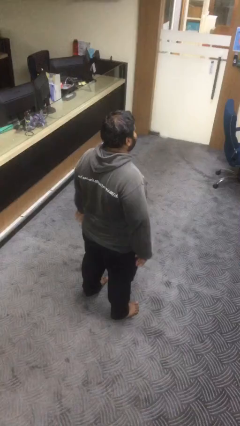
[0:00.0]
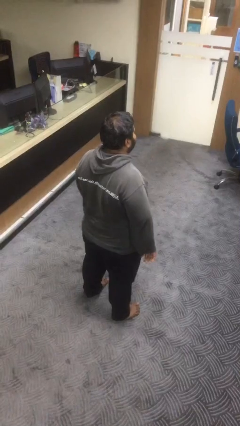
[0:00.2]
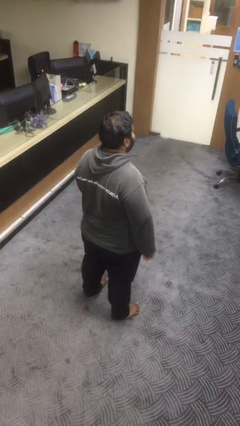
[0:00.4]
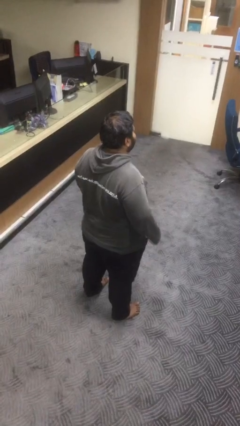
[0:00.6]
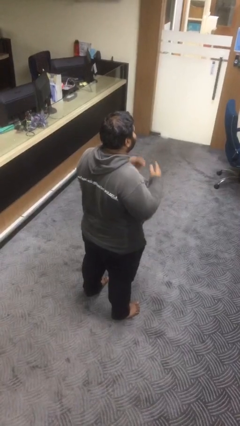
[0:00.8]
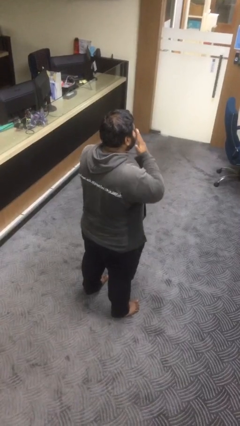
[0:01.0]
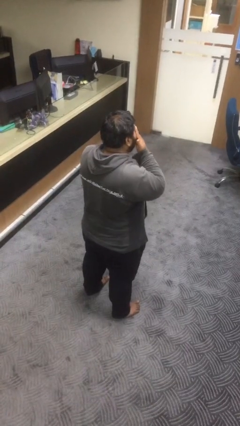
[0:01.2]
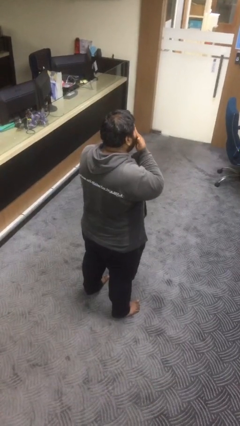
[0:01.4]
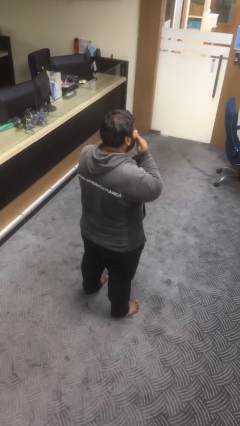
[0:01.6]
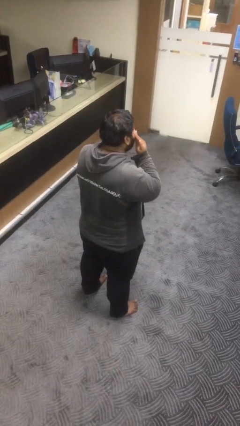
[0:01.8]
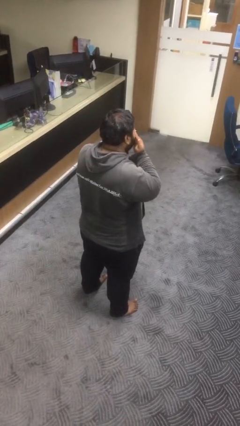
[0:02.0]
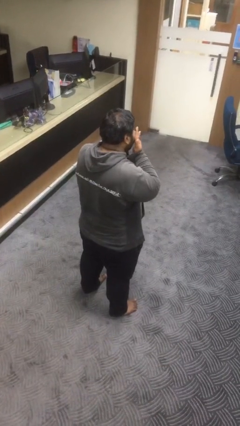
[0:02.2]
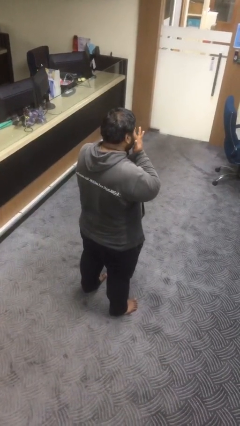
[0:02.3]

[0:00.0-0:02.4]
person rubs eyes

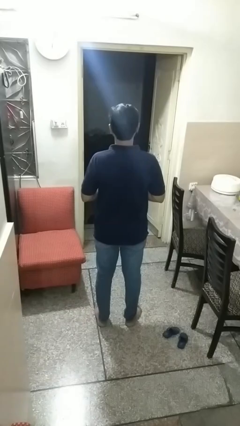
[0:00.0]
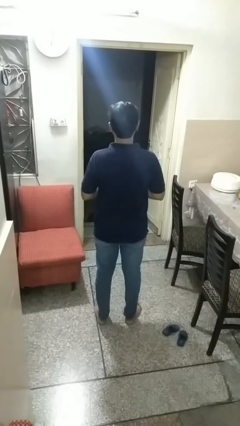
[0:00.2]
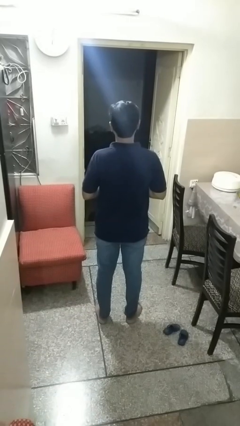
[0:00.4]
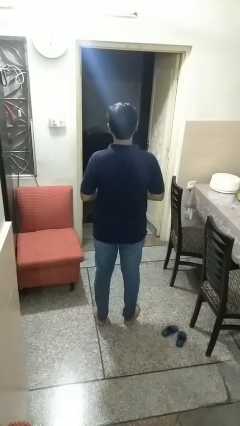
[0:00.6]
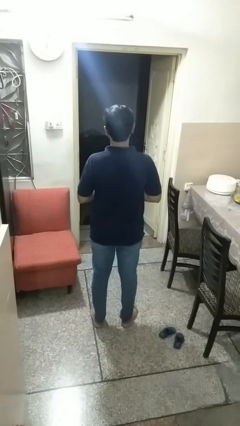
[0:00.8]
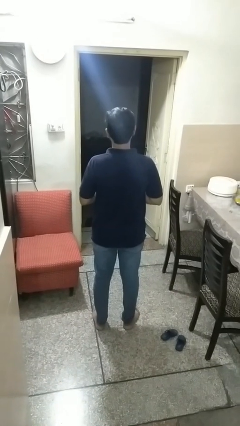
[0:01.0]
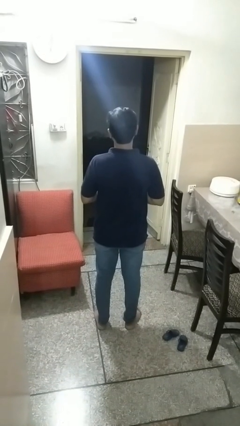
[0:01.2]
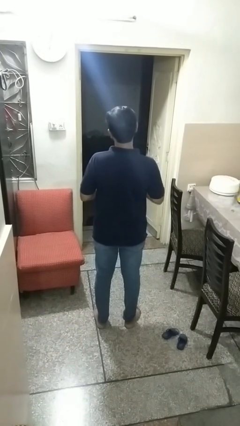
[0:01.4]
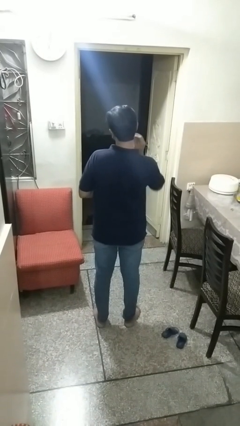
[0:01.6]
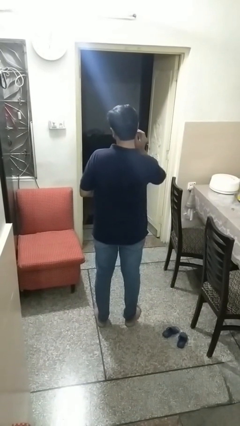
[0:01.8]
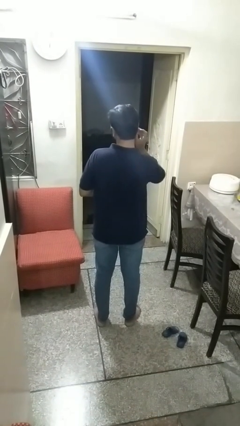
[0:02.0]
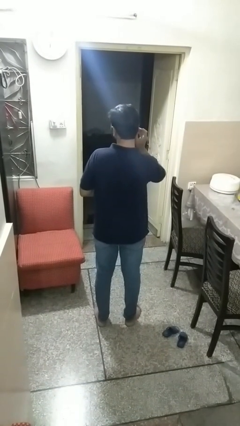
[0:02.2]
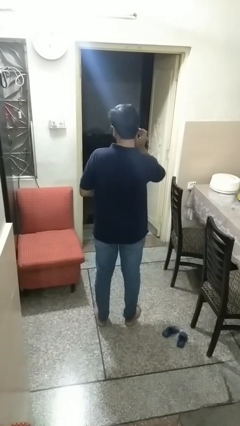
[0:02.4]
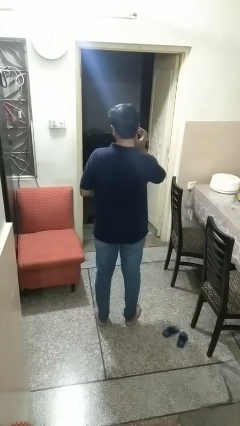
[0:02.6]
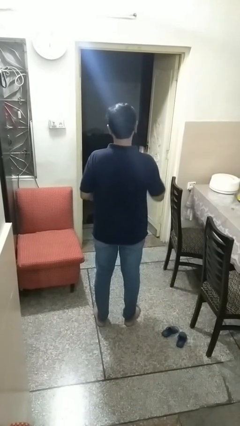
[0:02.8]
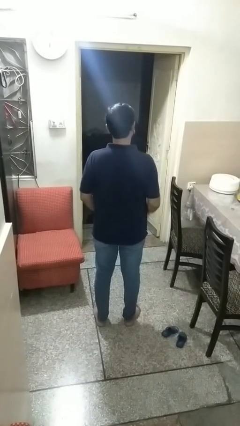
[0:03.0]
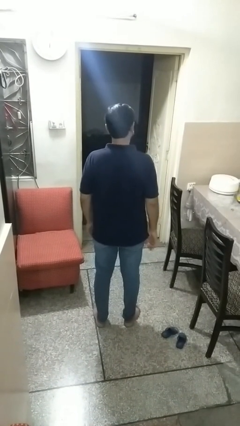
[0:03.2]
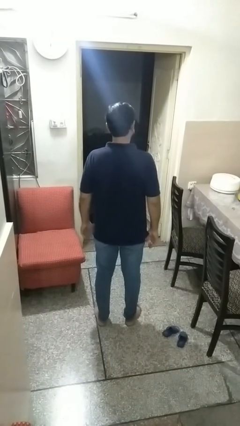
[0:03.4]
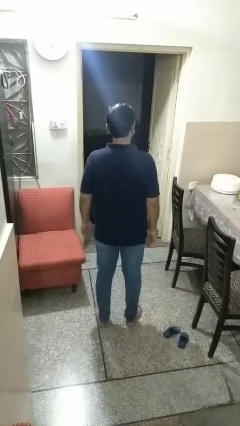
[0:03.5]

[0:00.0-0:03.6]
person puts on earrings

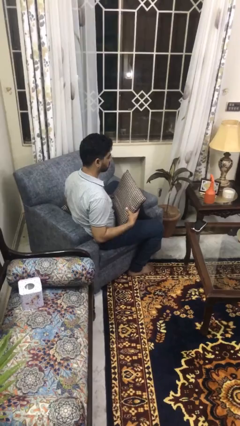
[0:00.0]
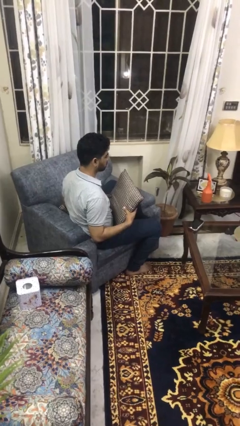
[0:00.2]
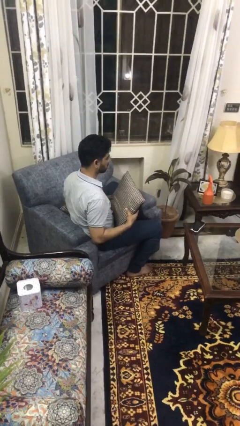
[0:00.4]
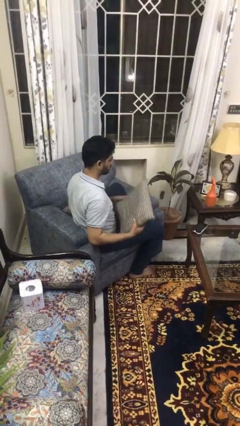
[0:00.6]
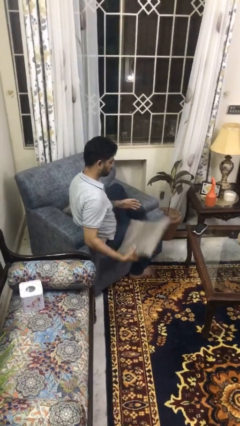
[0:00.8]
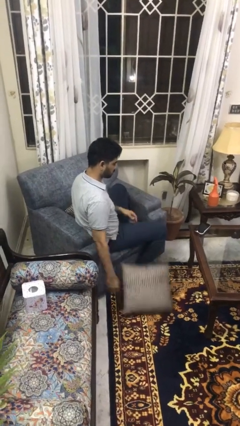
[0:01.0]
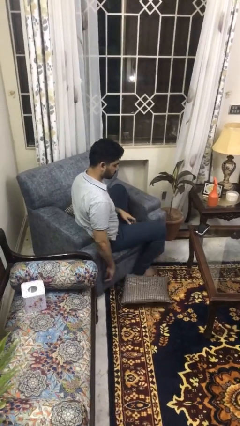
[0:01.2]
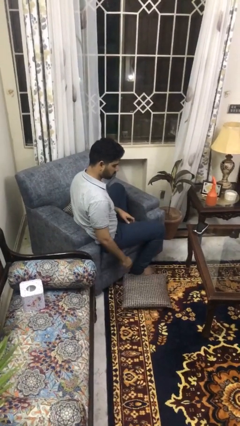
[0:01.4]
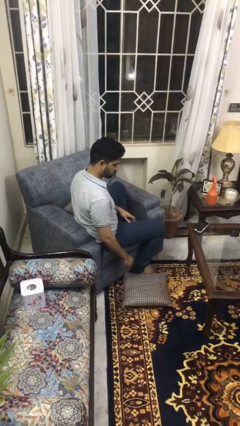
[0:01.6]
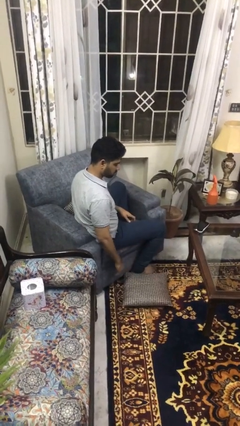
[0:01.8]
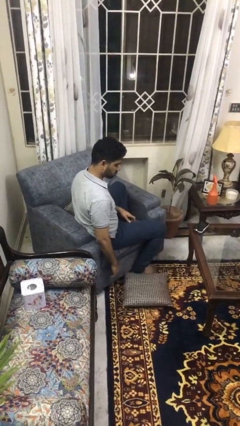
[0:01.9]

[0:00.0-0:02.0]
person throws object to ground

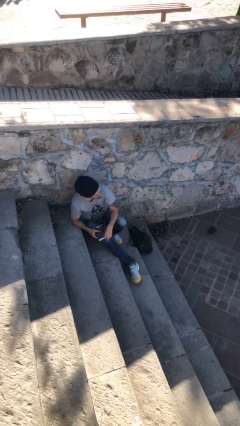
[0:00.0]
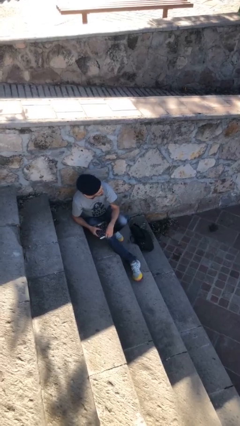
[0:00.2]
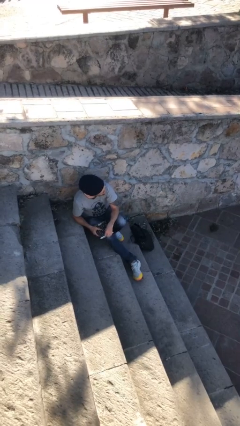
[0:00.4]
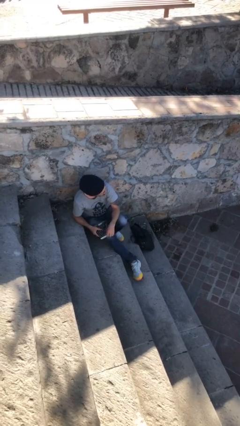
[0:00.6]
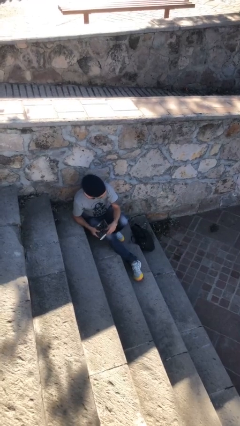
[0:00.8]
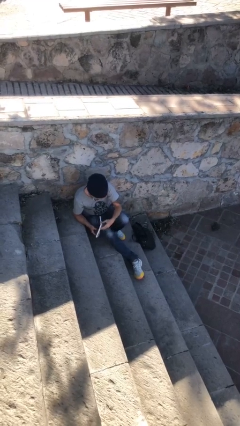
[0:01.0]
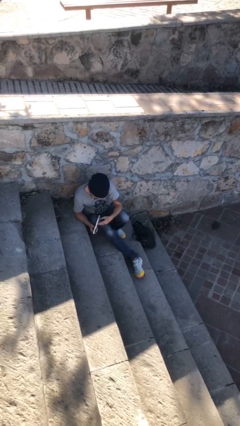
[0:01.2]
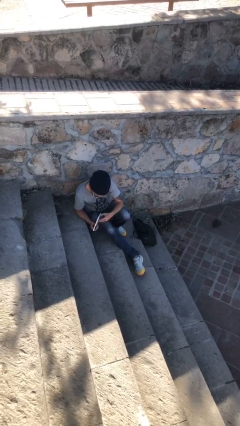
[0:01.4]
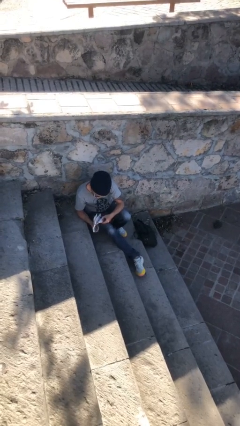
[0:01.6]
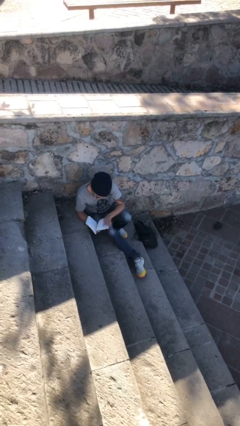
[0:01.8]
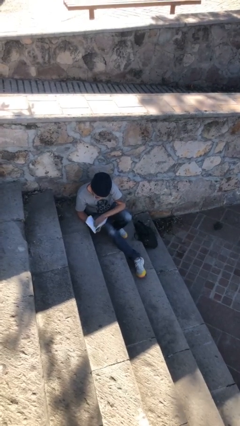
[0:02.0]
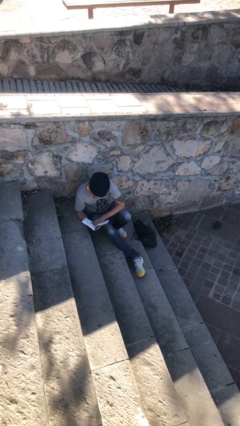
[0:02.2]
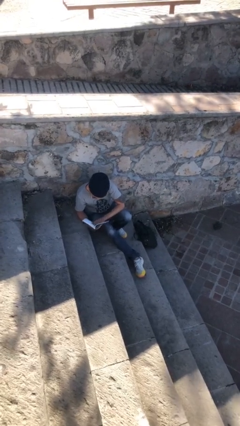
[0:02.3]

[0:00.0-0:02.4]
person reads document

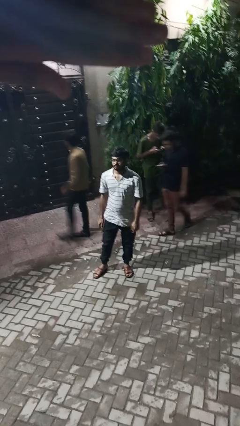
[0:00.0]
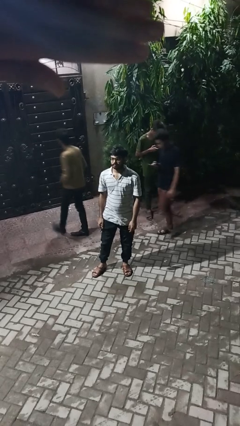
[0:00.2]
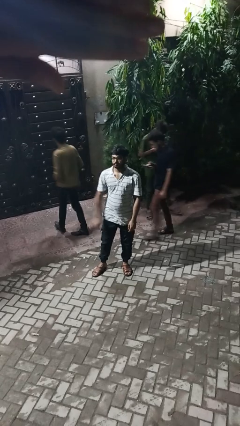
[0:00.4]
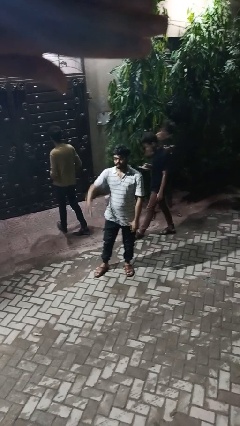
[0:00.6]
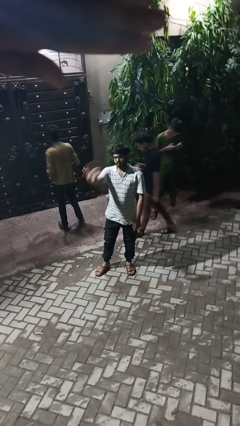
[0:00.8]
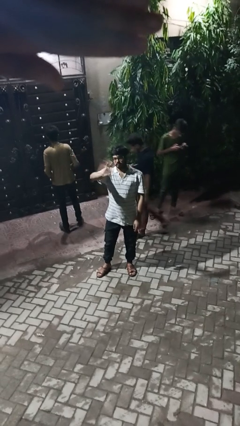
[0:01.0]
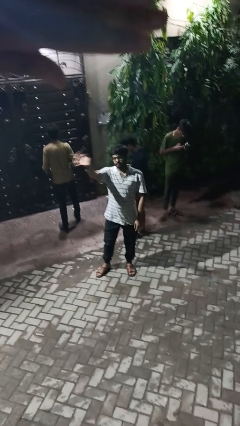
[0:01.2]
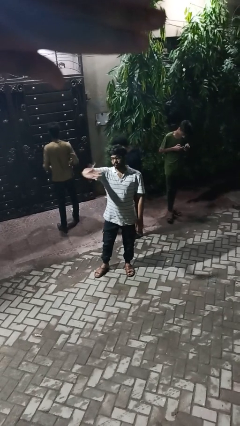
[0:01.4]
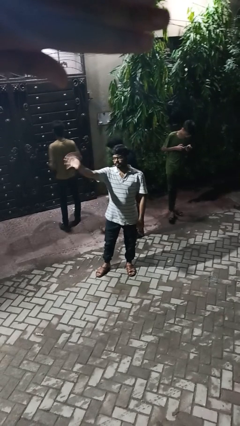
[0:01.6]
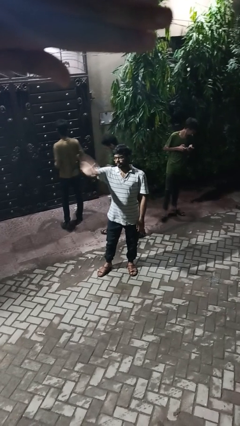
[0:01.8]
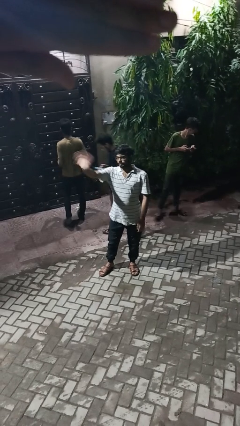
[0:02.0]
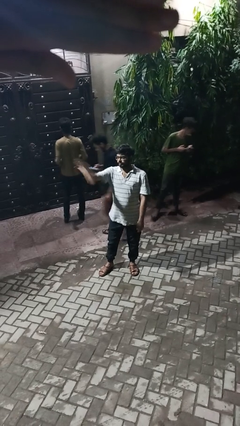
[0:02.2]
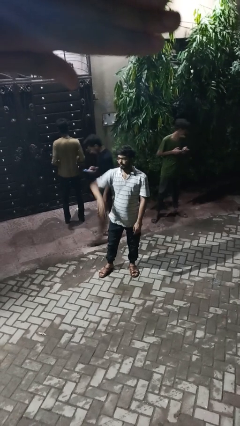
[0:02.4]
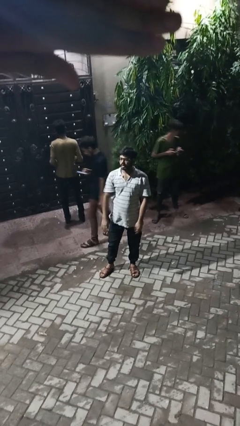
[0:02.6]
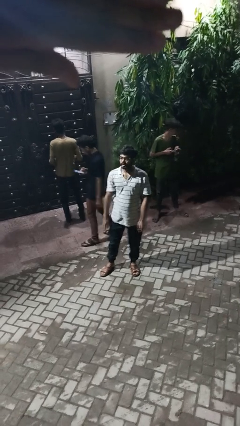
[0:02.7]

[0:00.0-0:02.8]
person waves at person

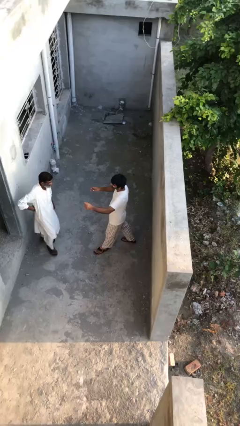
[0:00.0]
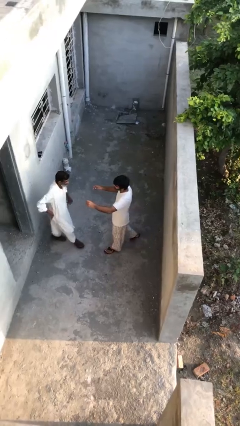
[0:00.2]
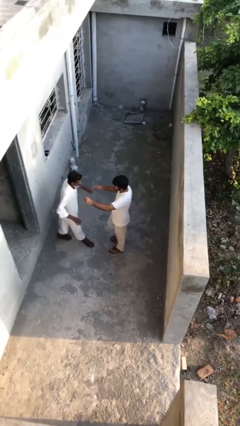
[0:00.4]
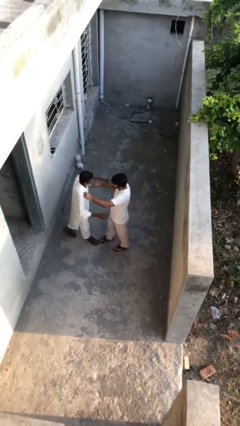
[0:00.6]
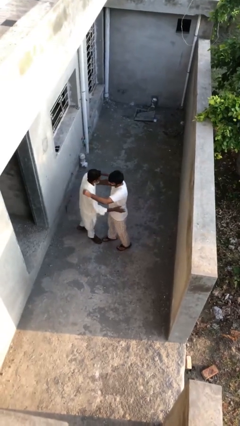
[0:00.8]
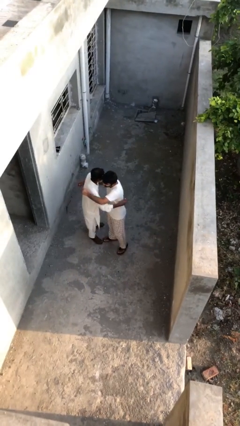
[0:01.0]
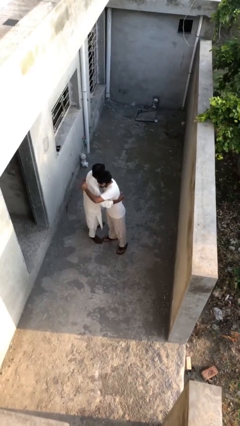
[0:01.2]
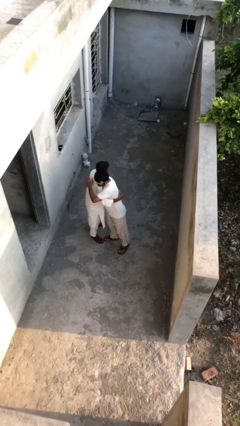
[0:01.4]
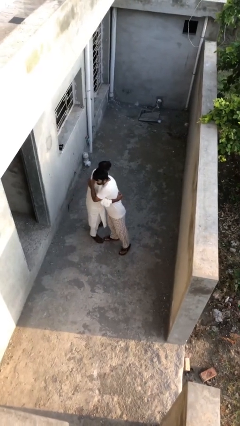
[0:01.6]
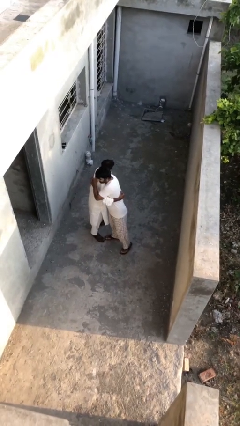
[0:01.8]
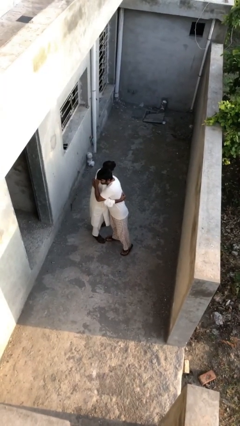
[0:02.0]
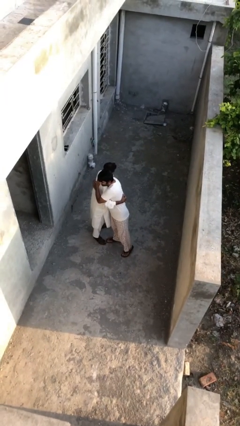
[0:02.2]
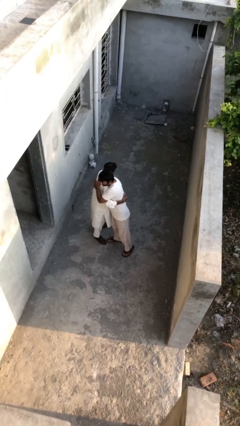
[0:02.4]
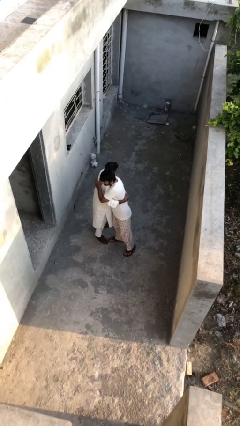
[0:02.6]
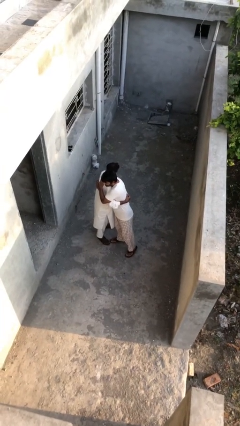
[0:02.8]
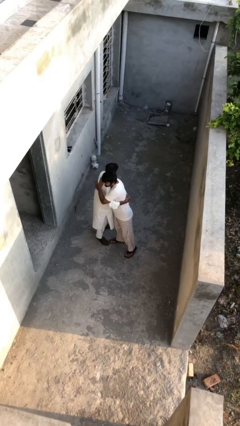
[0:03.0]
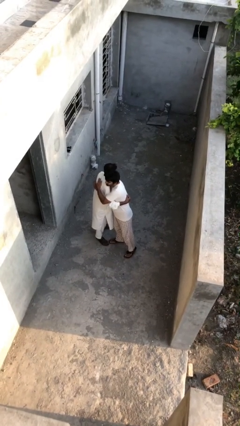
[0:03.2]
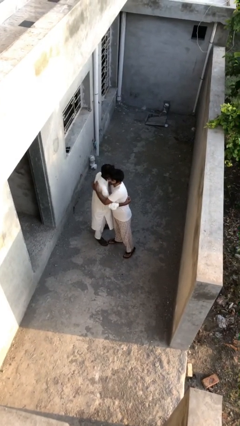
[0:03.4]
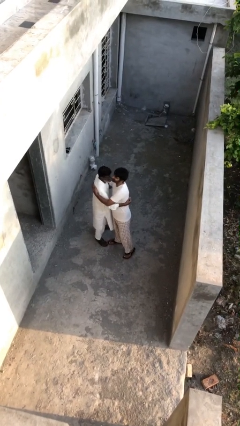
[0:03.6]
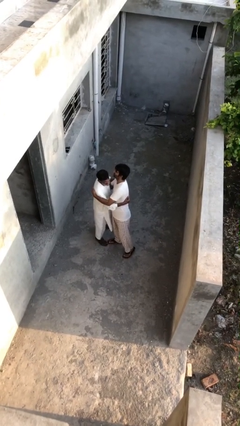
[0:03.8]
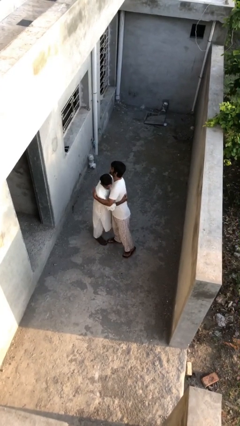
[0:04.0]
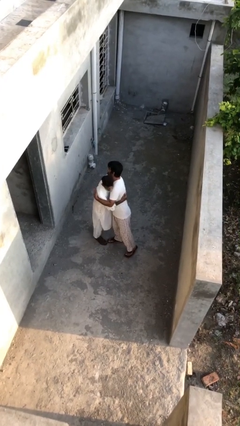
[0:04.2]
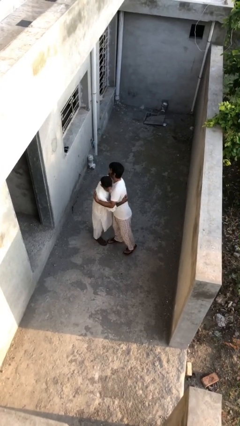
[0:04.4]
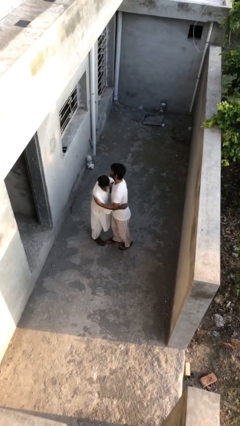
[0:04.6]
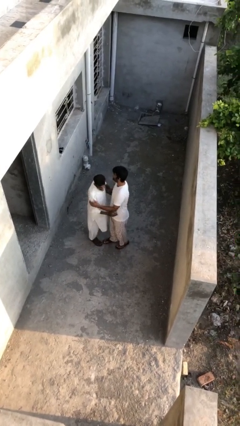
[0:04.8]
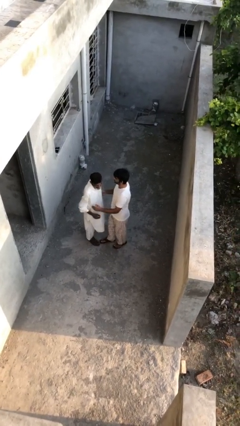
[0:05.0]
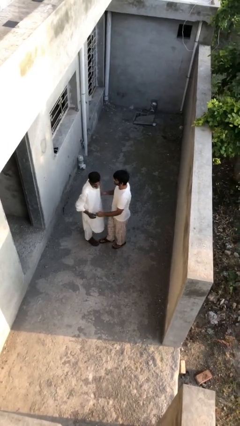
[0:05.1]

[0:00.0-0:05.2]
person embraces person
